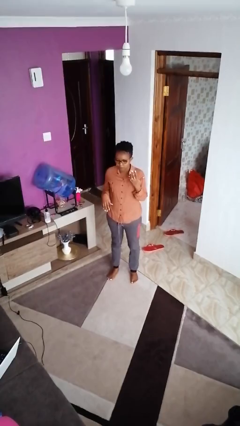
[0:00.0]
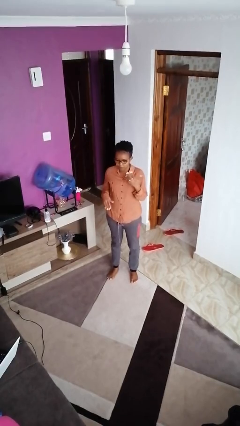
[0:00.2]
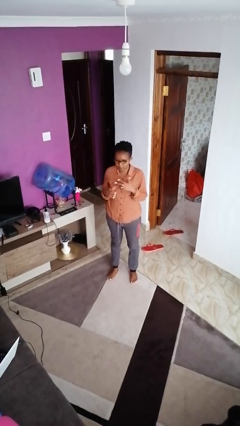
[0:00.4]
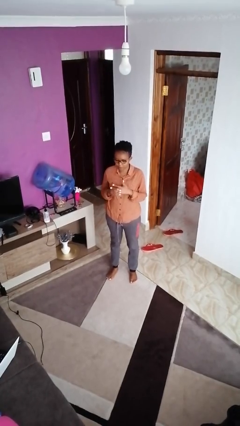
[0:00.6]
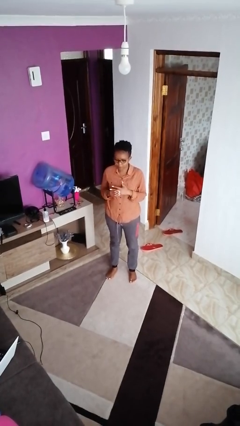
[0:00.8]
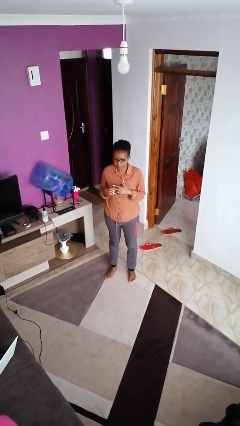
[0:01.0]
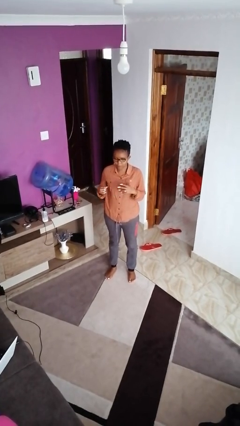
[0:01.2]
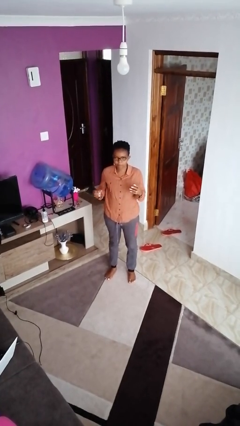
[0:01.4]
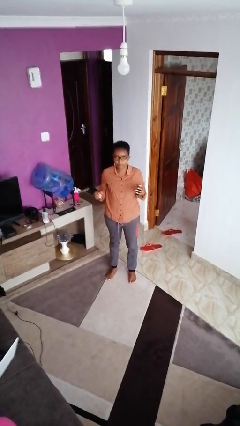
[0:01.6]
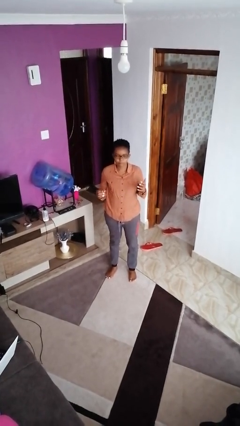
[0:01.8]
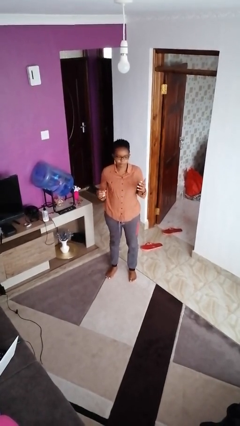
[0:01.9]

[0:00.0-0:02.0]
person takes off ring

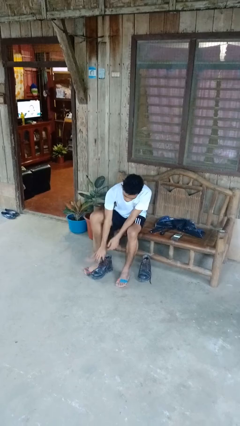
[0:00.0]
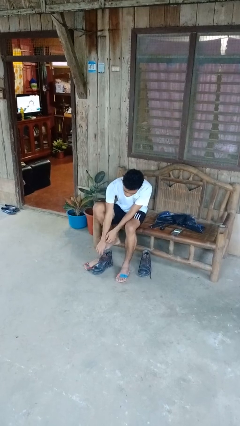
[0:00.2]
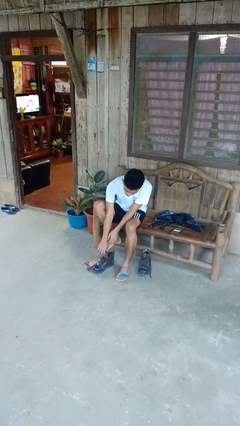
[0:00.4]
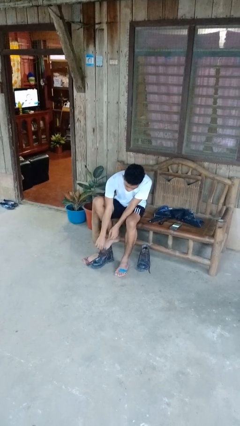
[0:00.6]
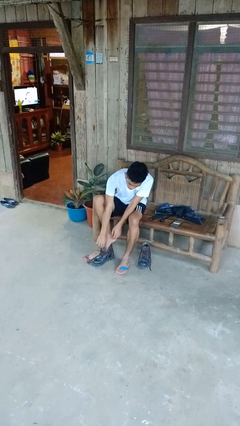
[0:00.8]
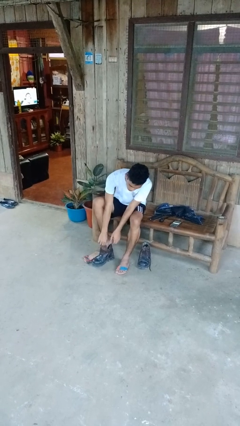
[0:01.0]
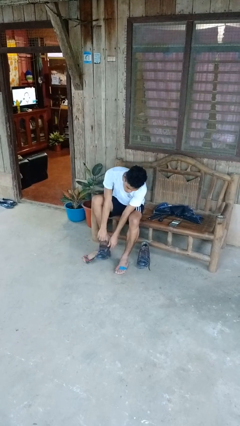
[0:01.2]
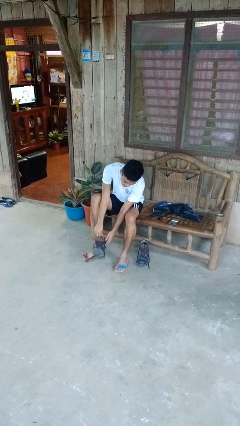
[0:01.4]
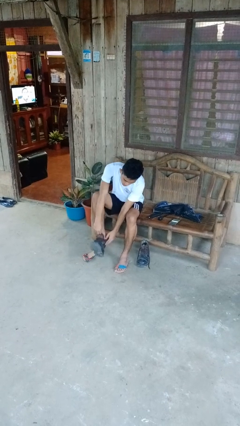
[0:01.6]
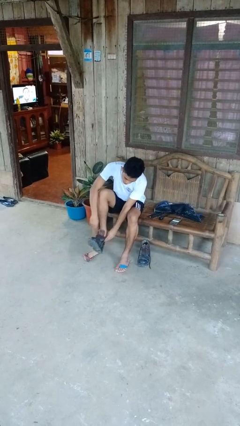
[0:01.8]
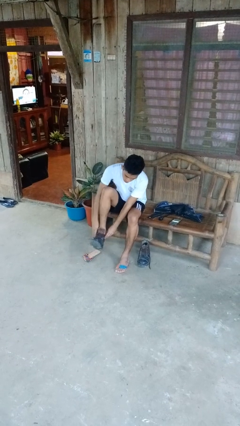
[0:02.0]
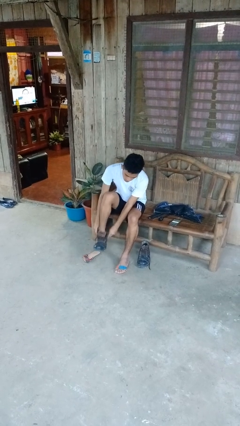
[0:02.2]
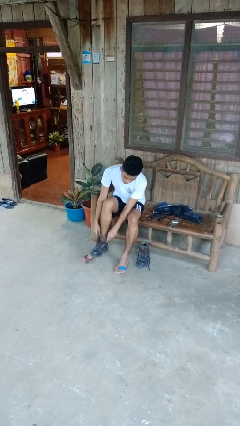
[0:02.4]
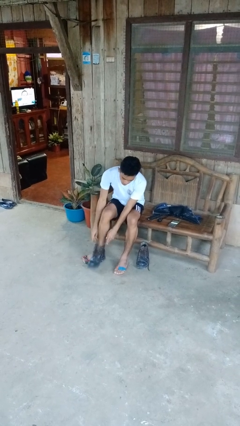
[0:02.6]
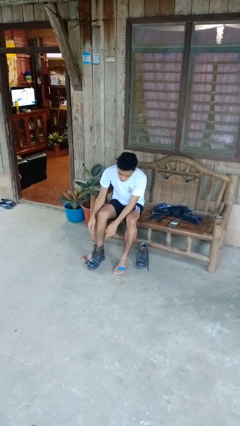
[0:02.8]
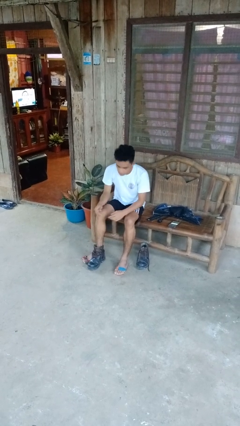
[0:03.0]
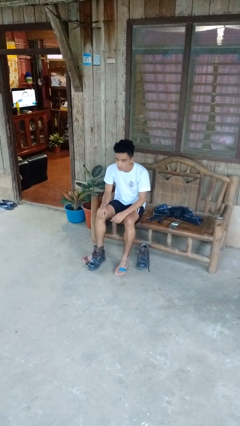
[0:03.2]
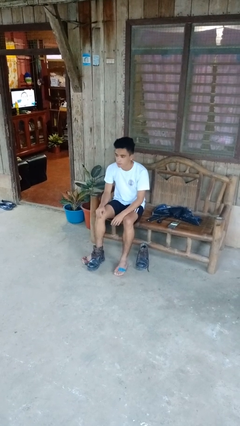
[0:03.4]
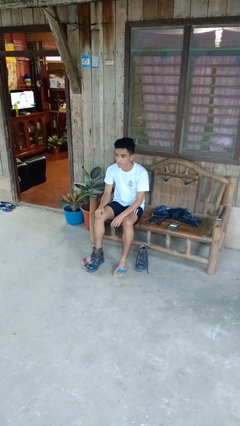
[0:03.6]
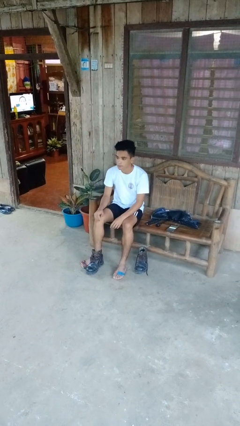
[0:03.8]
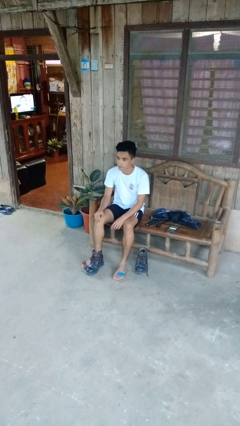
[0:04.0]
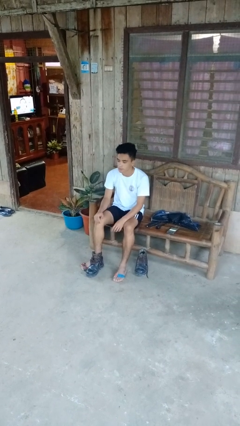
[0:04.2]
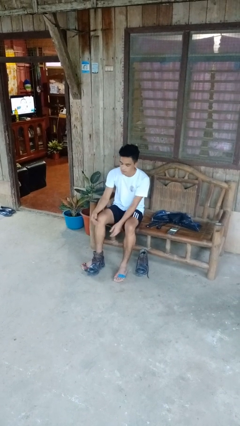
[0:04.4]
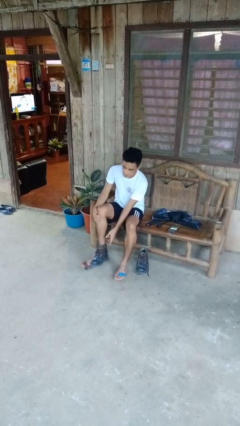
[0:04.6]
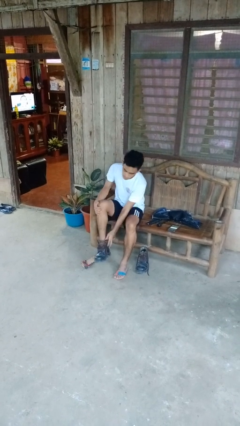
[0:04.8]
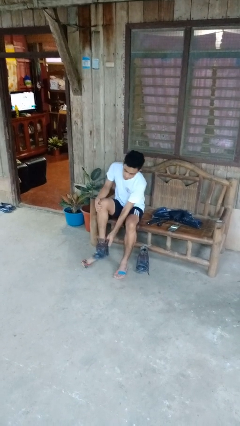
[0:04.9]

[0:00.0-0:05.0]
person puts on boots

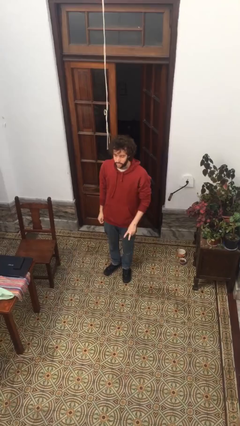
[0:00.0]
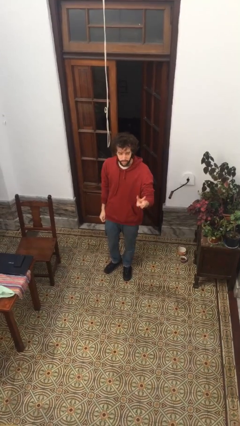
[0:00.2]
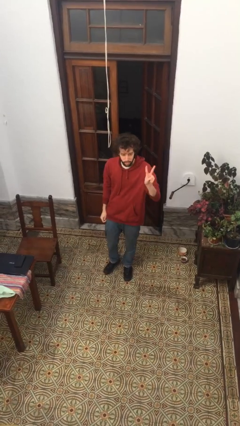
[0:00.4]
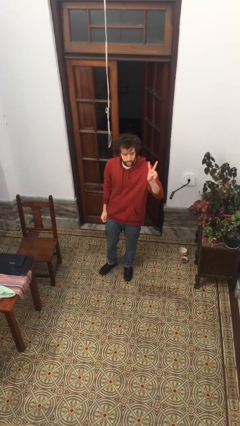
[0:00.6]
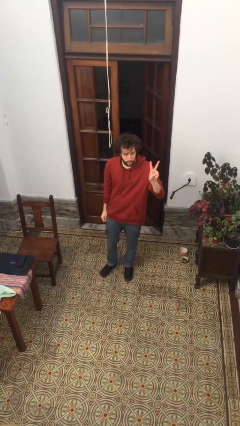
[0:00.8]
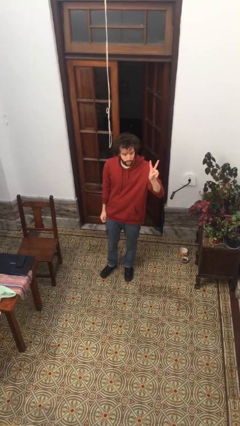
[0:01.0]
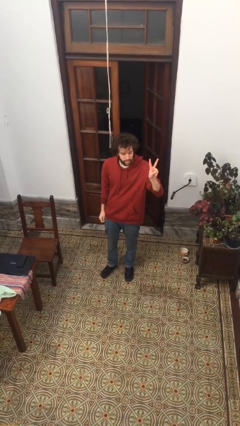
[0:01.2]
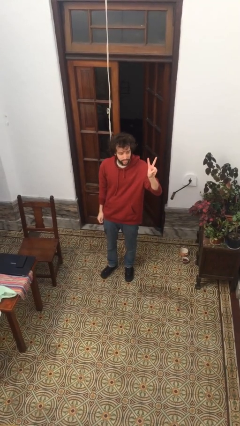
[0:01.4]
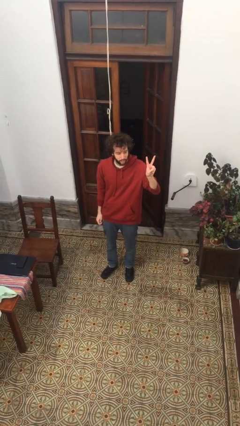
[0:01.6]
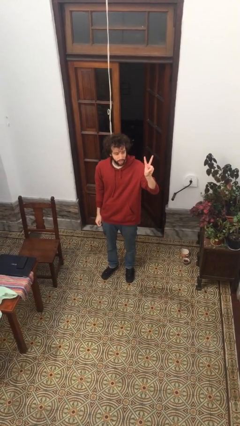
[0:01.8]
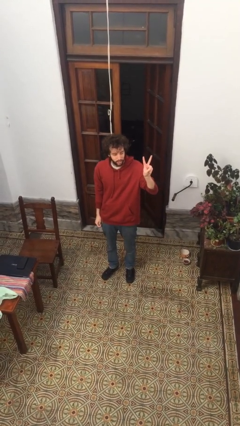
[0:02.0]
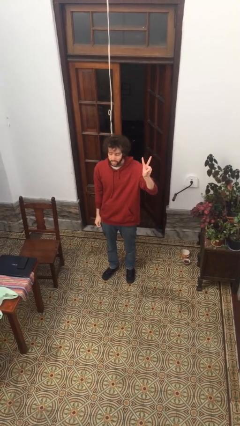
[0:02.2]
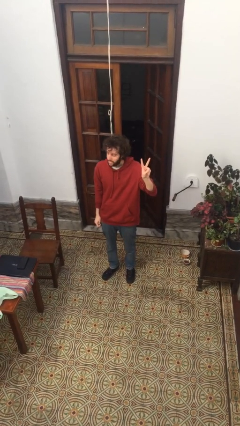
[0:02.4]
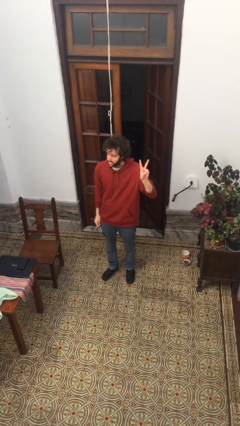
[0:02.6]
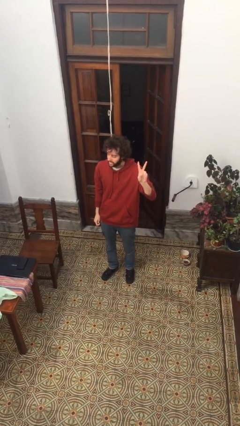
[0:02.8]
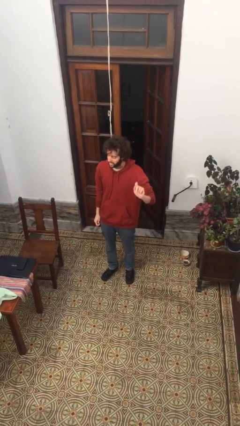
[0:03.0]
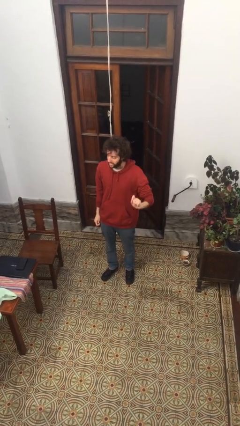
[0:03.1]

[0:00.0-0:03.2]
person gestures peace

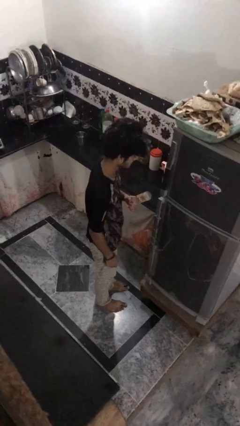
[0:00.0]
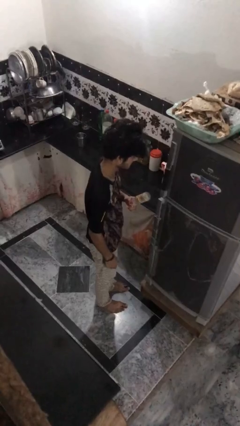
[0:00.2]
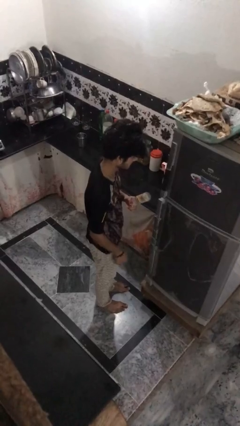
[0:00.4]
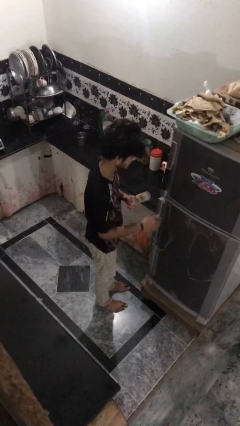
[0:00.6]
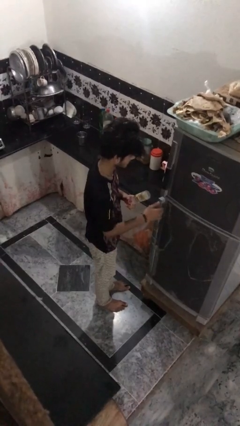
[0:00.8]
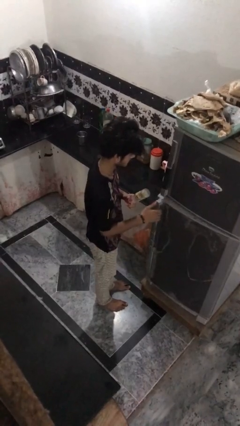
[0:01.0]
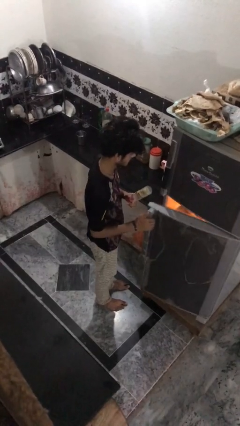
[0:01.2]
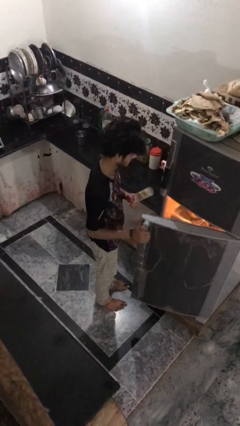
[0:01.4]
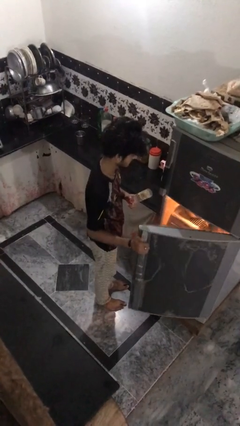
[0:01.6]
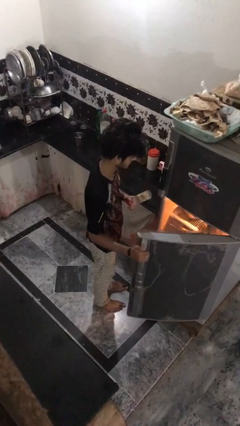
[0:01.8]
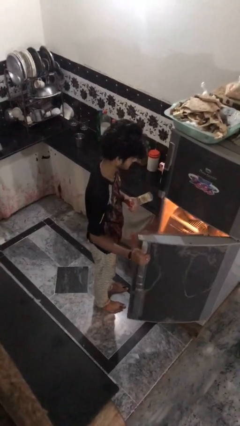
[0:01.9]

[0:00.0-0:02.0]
person opens refrigerator

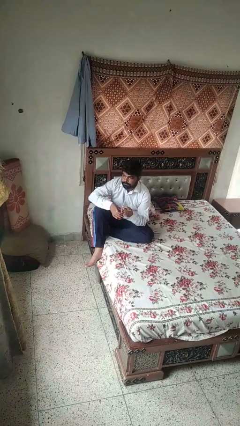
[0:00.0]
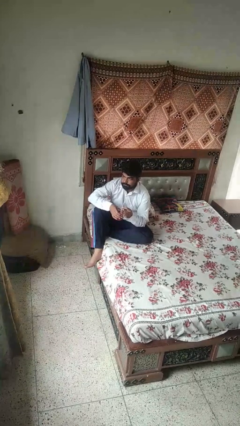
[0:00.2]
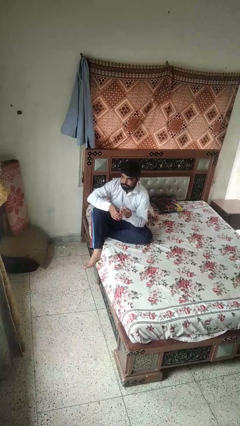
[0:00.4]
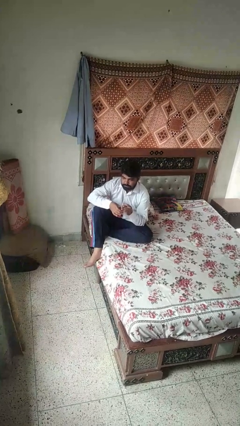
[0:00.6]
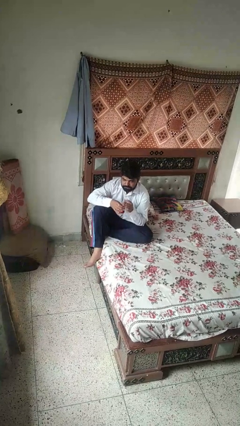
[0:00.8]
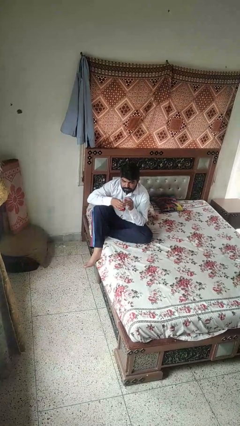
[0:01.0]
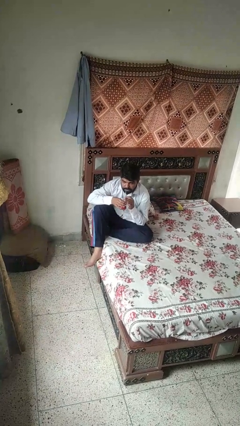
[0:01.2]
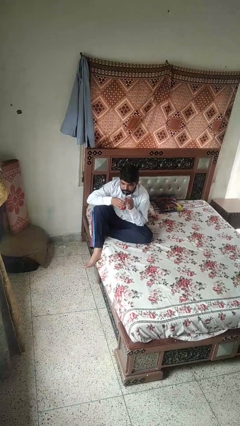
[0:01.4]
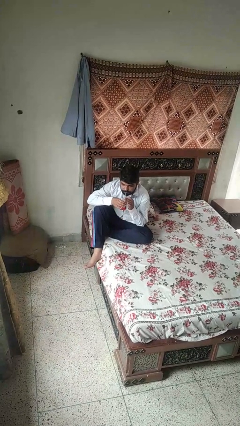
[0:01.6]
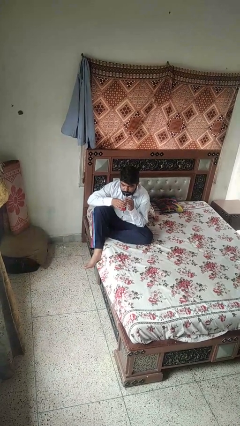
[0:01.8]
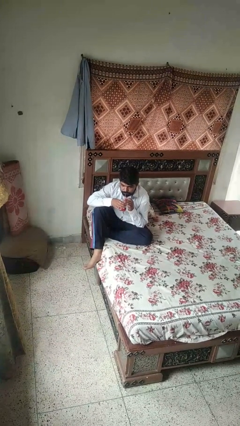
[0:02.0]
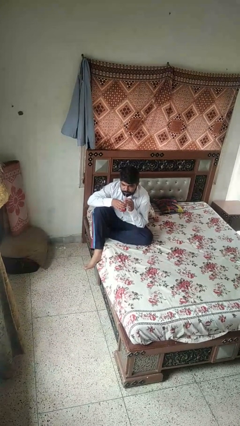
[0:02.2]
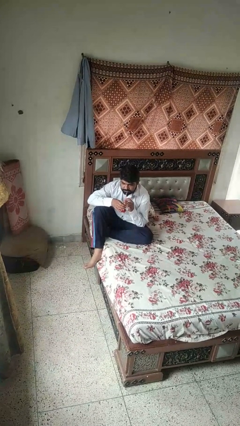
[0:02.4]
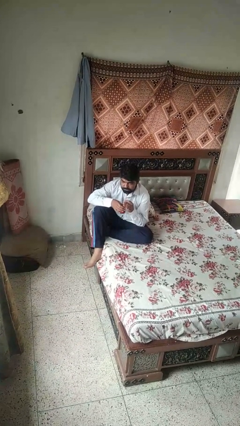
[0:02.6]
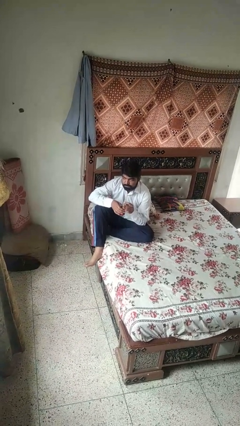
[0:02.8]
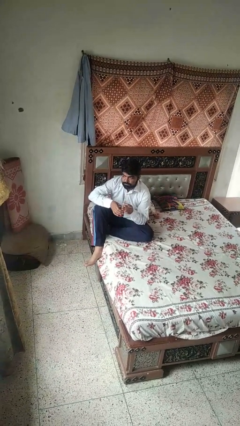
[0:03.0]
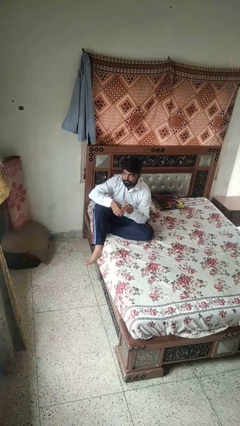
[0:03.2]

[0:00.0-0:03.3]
person drinks from straw

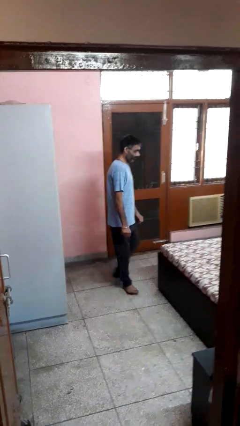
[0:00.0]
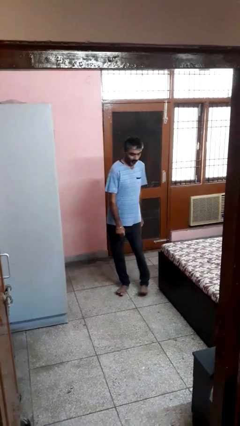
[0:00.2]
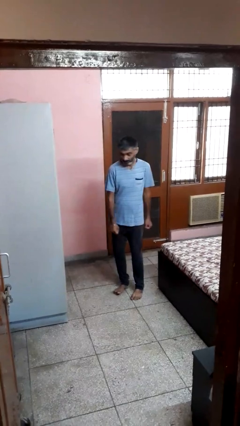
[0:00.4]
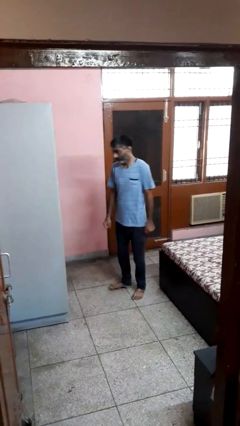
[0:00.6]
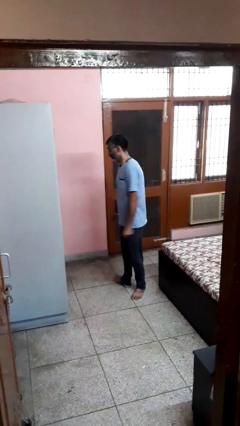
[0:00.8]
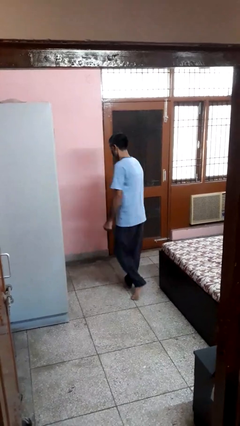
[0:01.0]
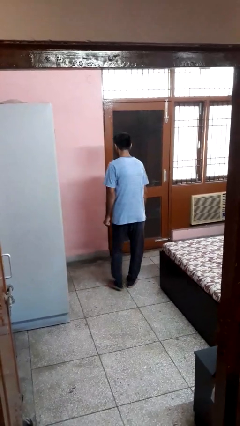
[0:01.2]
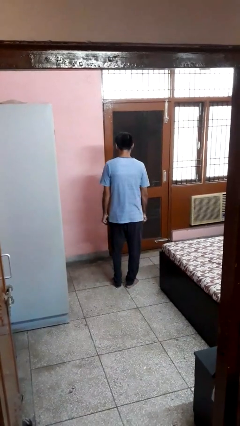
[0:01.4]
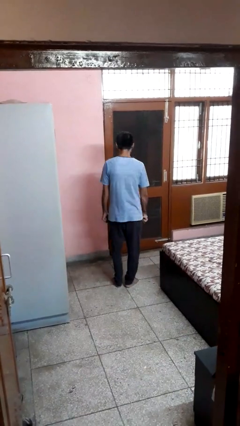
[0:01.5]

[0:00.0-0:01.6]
person twirls
